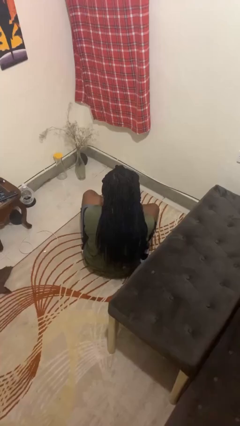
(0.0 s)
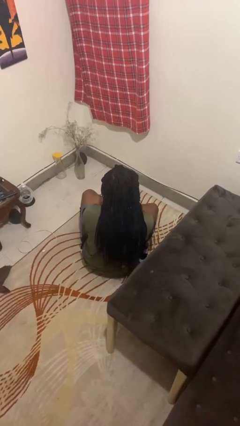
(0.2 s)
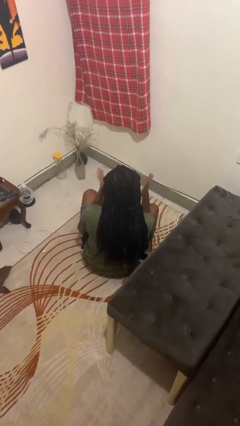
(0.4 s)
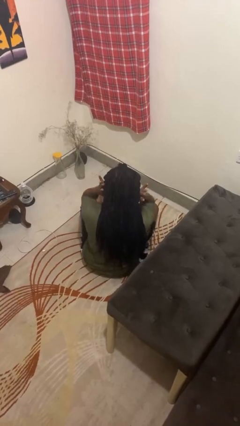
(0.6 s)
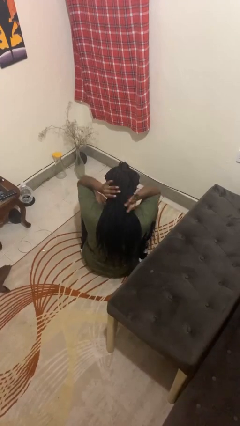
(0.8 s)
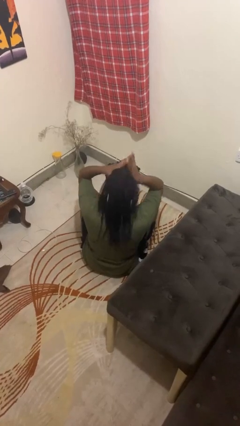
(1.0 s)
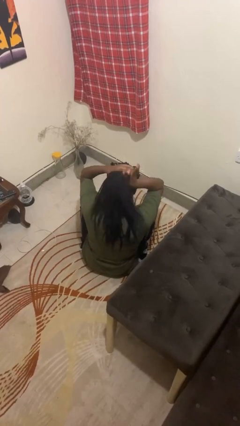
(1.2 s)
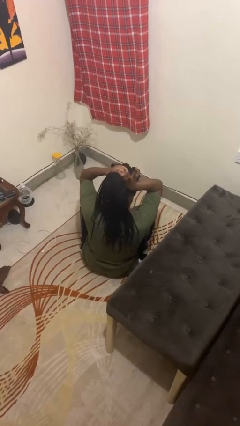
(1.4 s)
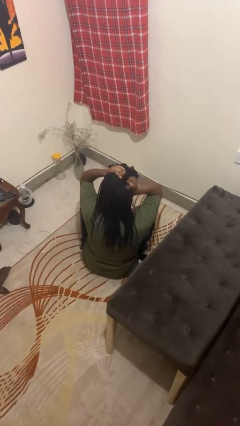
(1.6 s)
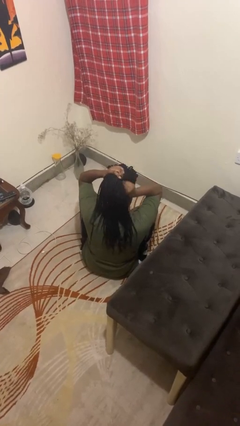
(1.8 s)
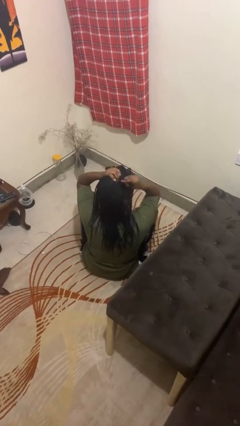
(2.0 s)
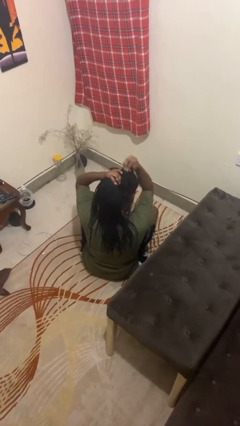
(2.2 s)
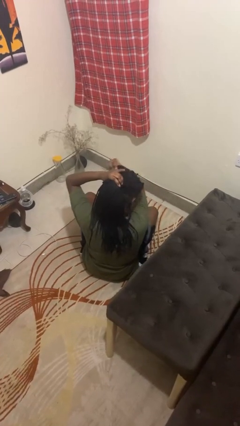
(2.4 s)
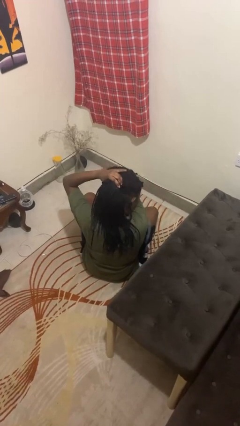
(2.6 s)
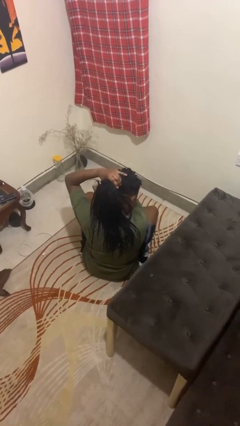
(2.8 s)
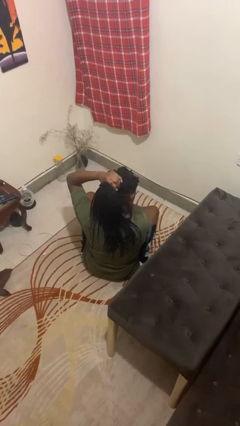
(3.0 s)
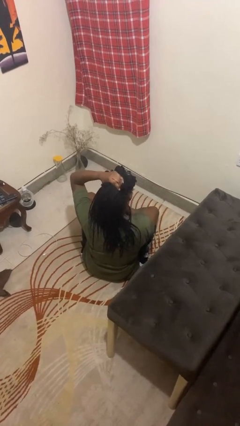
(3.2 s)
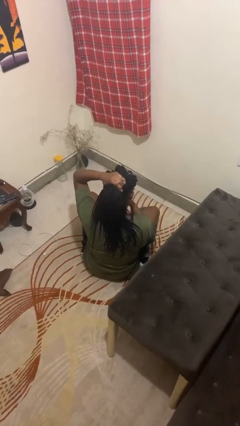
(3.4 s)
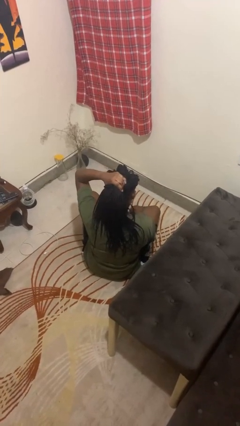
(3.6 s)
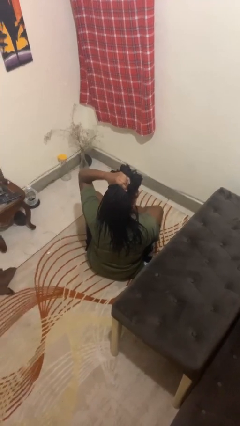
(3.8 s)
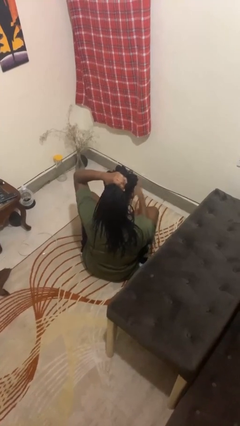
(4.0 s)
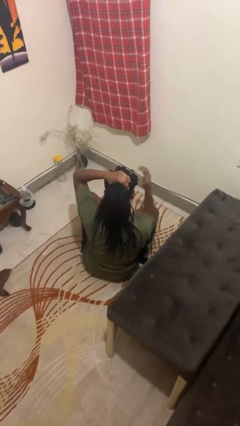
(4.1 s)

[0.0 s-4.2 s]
person puts hair in ponytail

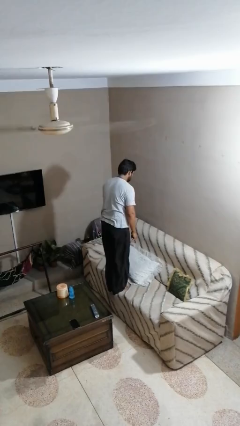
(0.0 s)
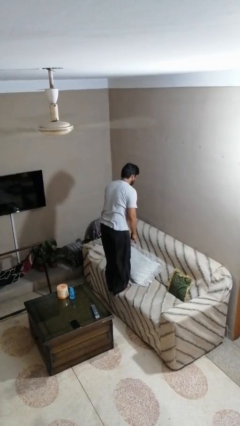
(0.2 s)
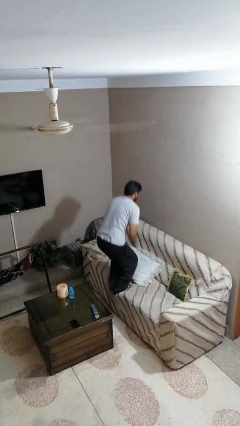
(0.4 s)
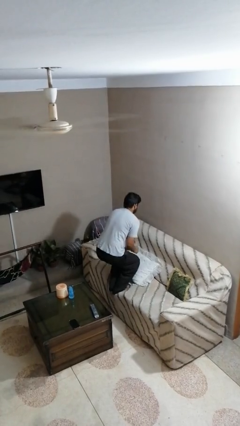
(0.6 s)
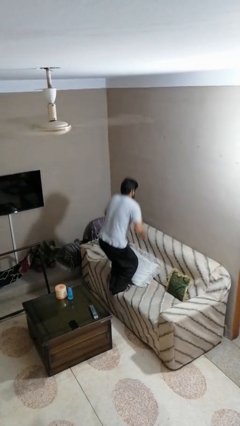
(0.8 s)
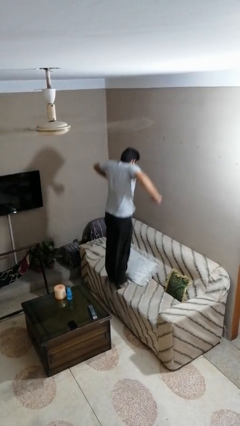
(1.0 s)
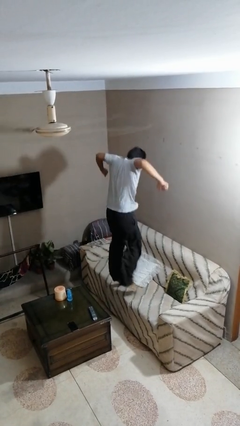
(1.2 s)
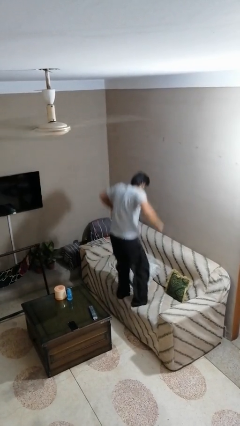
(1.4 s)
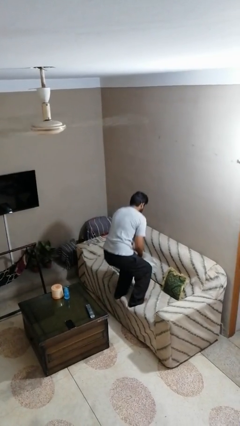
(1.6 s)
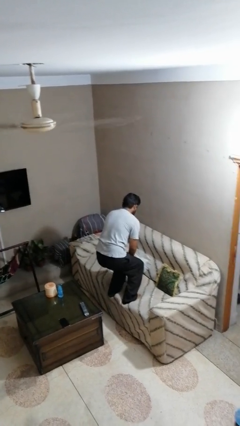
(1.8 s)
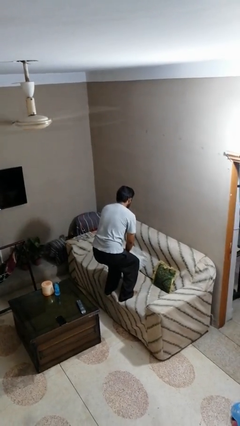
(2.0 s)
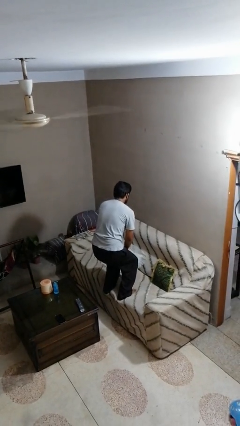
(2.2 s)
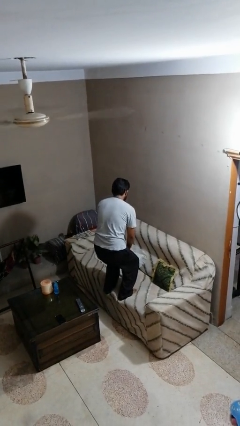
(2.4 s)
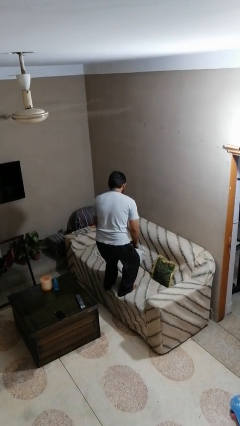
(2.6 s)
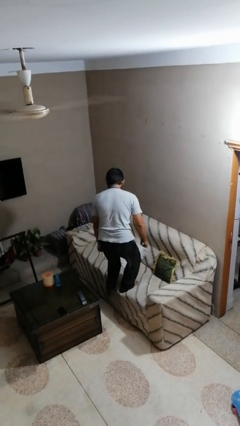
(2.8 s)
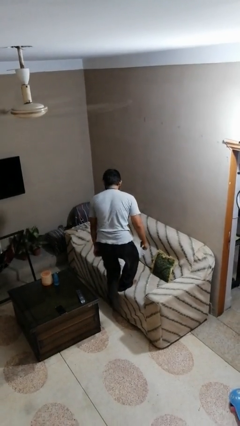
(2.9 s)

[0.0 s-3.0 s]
person jumps on couch

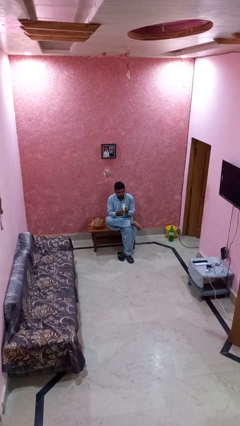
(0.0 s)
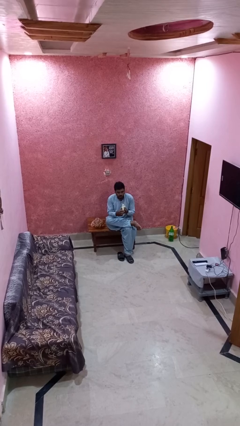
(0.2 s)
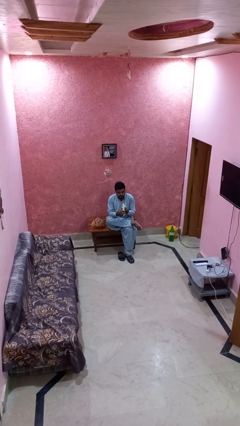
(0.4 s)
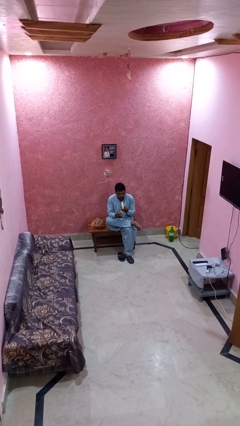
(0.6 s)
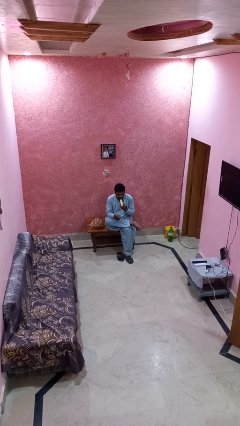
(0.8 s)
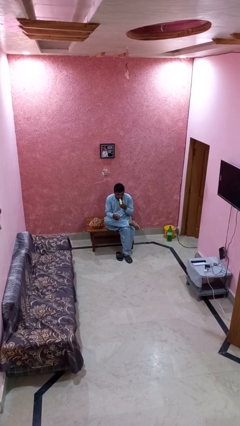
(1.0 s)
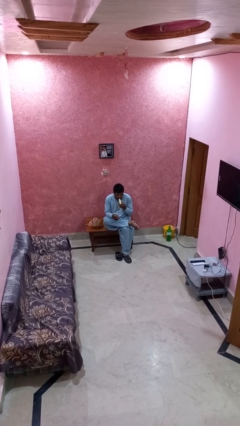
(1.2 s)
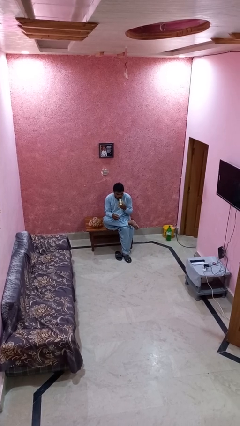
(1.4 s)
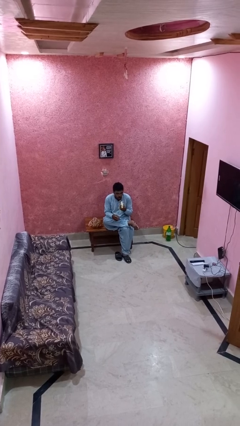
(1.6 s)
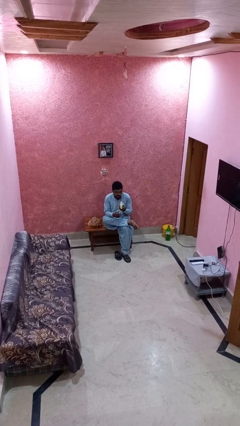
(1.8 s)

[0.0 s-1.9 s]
person eats banana

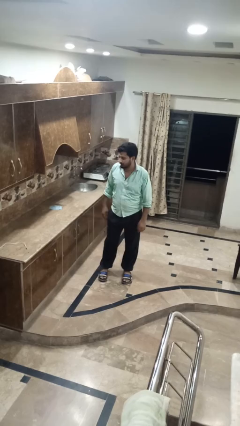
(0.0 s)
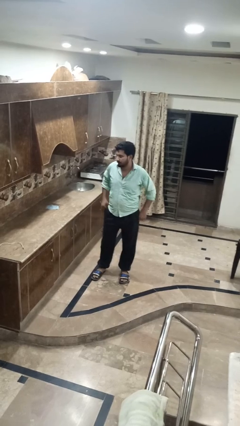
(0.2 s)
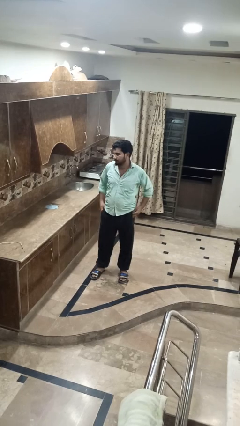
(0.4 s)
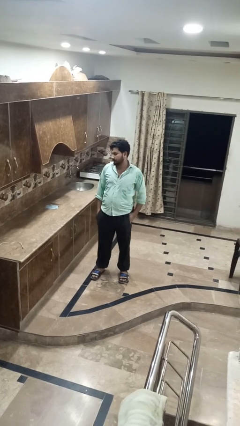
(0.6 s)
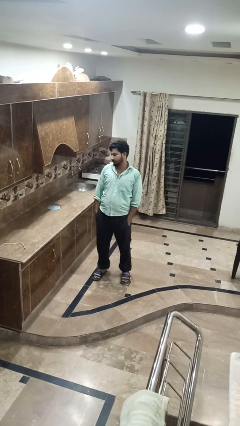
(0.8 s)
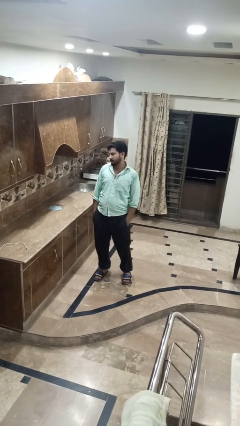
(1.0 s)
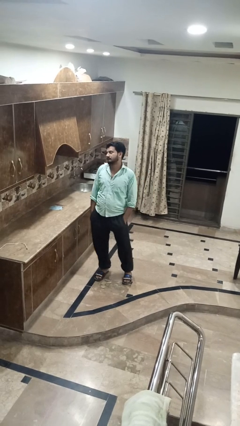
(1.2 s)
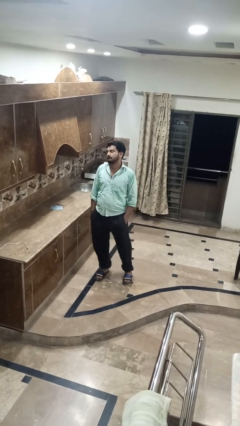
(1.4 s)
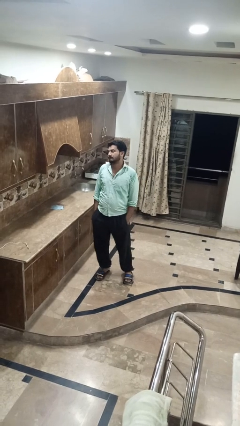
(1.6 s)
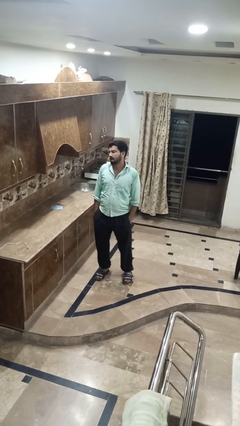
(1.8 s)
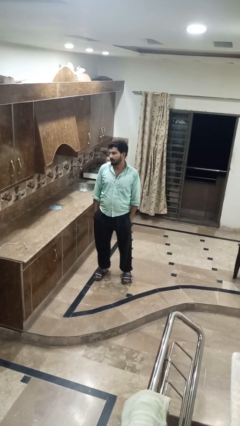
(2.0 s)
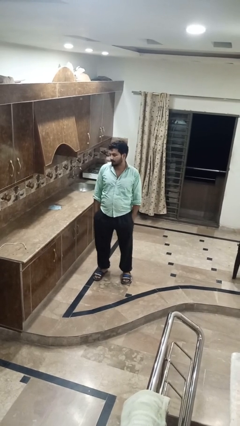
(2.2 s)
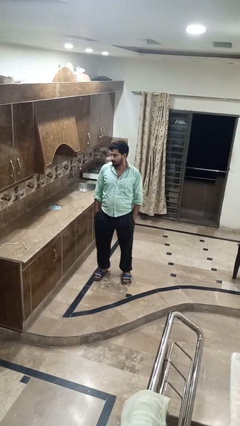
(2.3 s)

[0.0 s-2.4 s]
person puts hands in back pockets

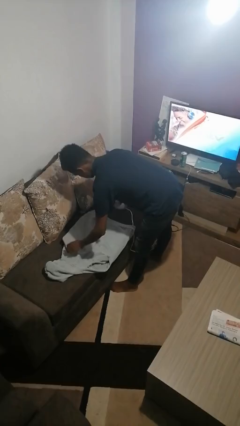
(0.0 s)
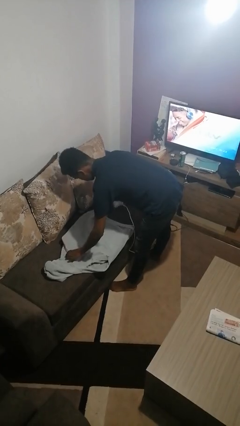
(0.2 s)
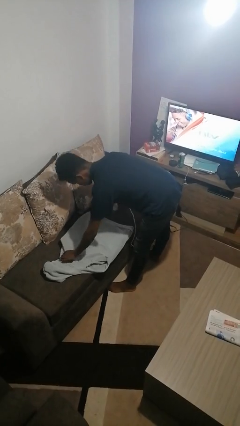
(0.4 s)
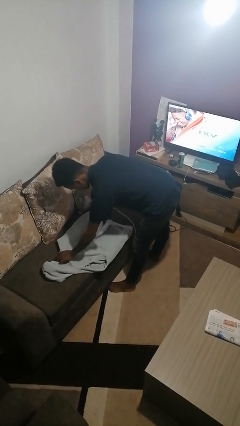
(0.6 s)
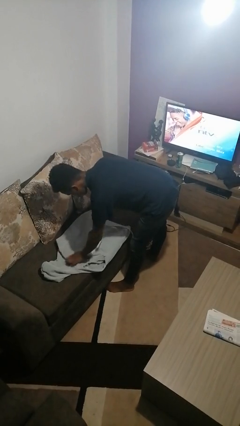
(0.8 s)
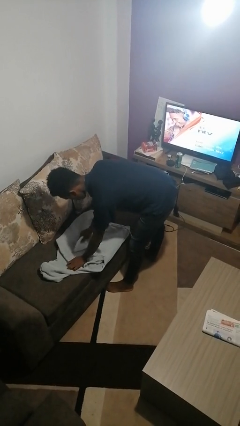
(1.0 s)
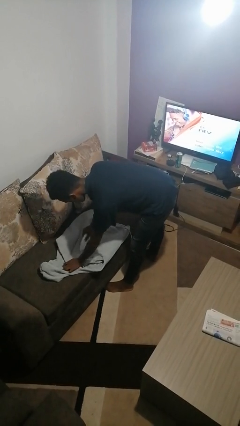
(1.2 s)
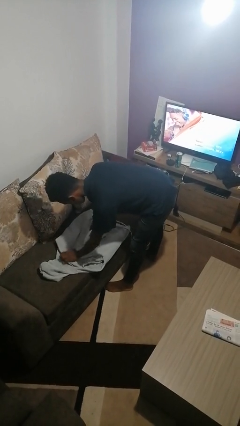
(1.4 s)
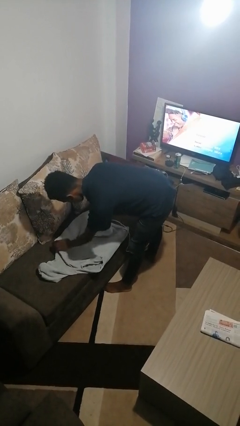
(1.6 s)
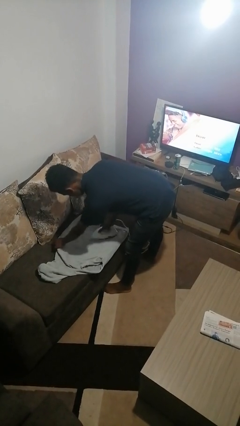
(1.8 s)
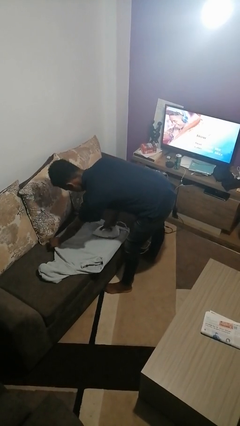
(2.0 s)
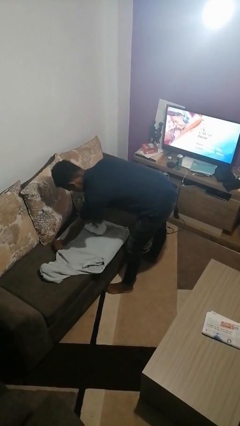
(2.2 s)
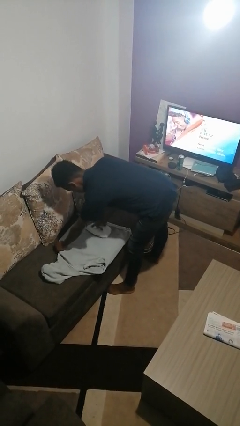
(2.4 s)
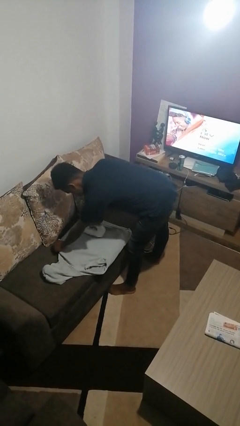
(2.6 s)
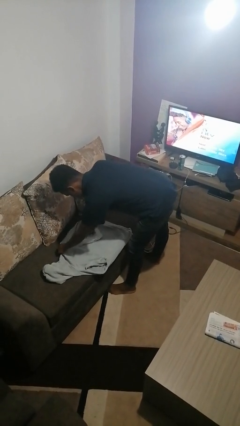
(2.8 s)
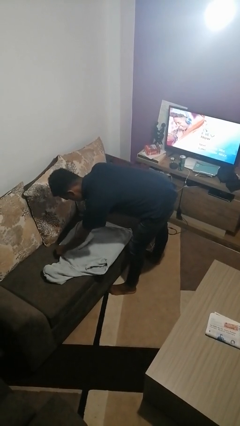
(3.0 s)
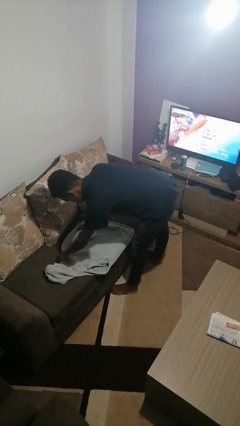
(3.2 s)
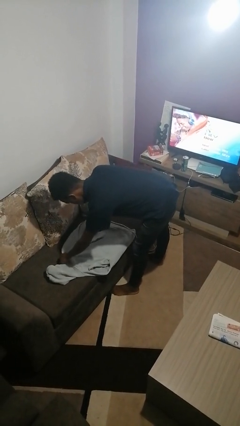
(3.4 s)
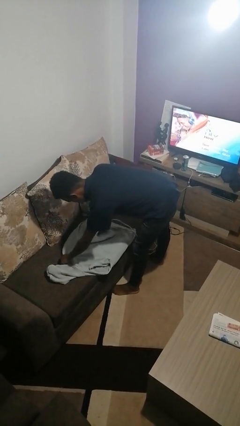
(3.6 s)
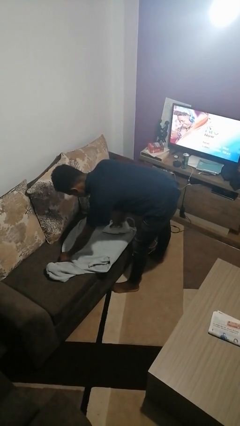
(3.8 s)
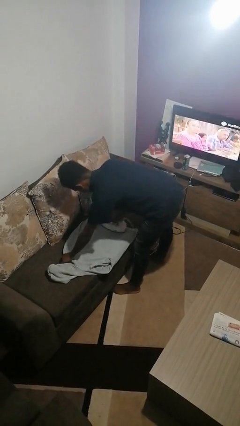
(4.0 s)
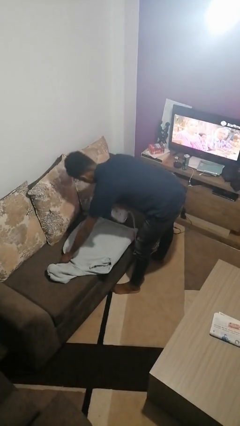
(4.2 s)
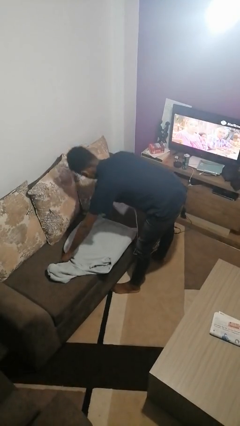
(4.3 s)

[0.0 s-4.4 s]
person irons clothes

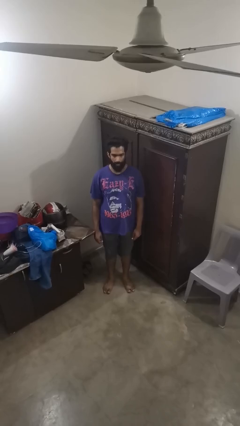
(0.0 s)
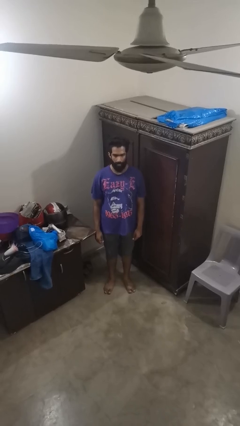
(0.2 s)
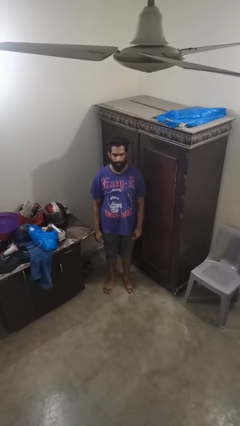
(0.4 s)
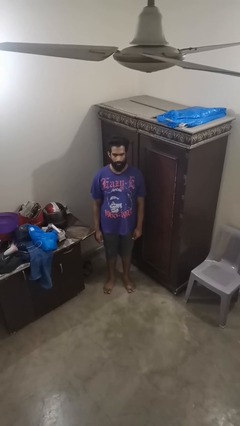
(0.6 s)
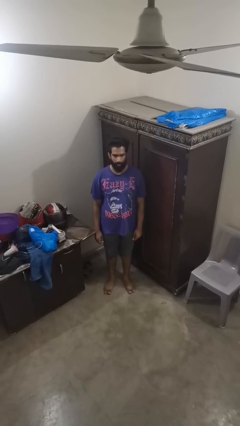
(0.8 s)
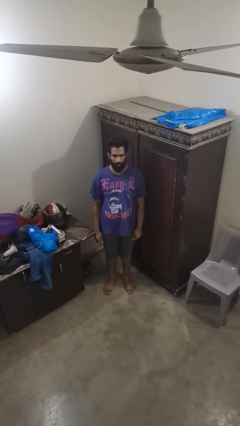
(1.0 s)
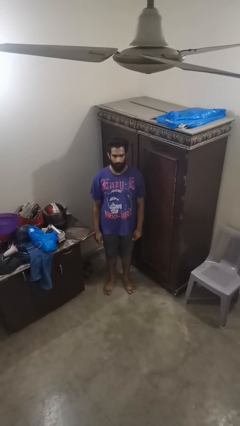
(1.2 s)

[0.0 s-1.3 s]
person sticks out tongue

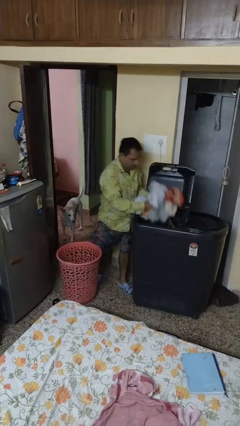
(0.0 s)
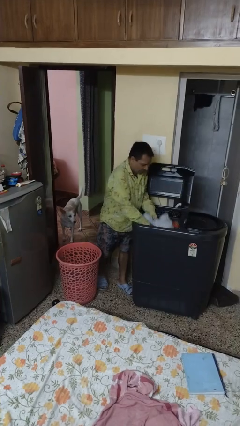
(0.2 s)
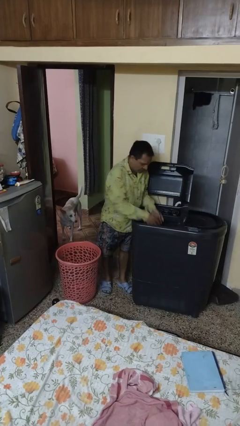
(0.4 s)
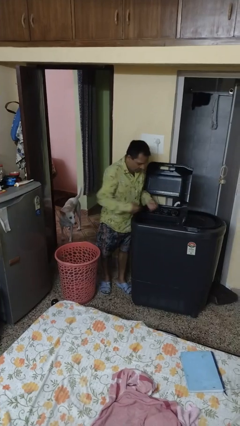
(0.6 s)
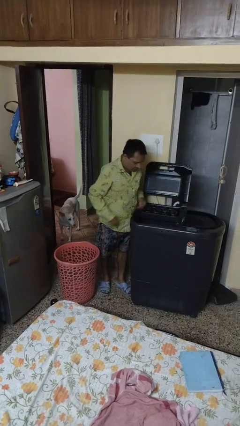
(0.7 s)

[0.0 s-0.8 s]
person loads clotheswasher
